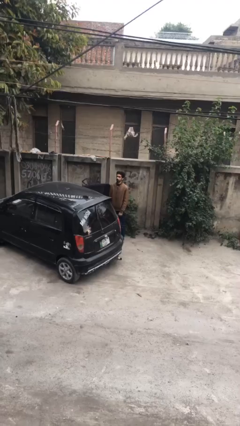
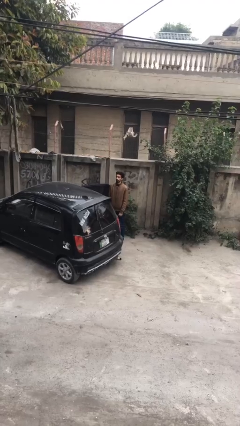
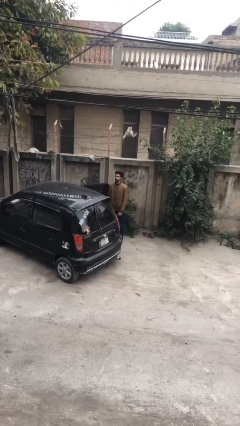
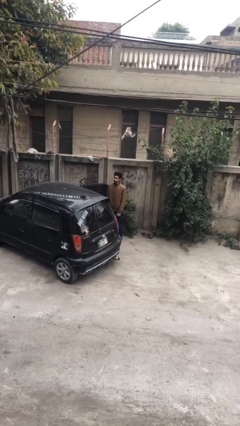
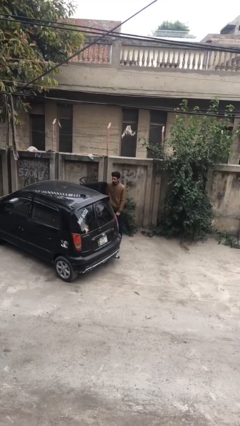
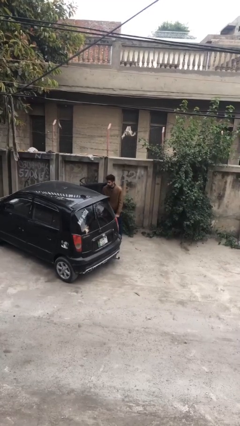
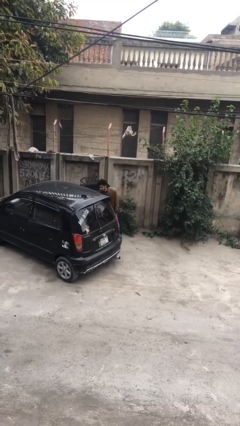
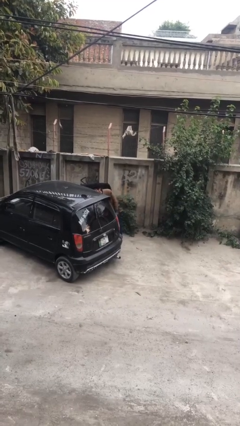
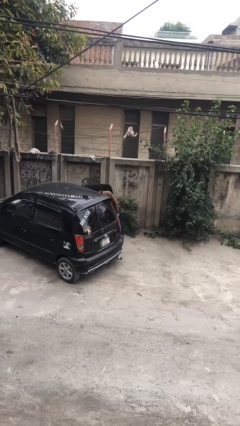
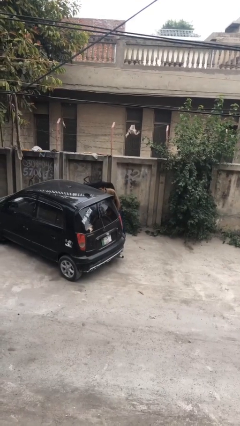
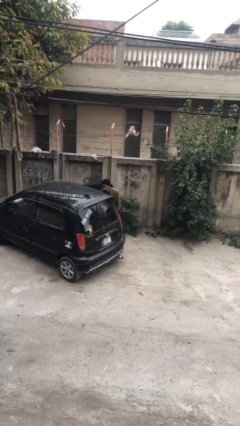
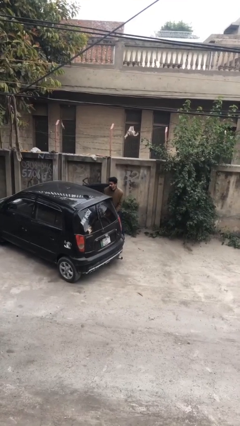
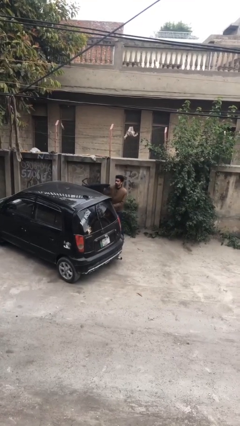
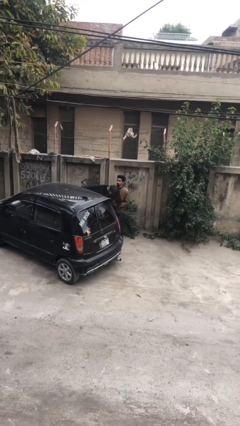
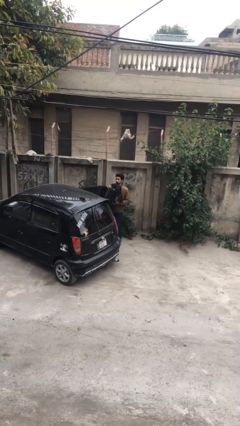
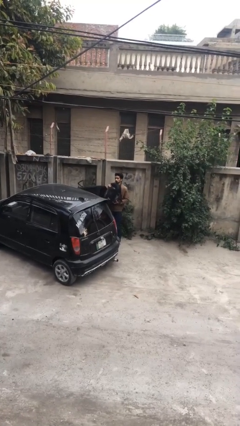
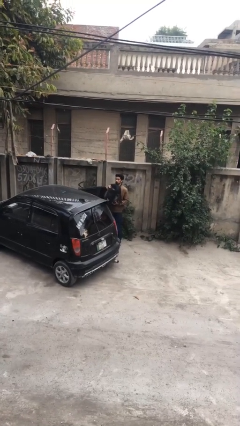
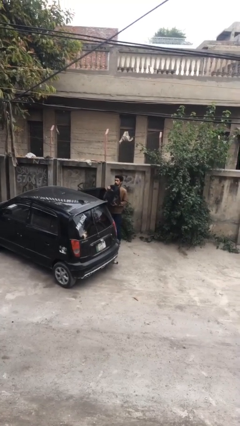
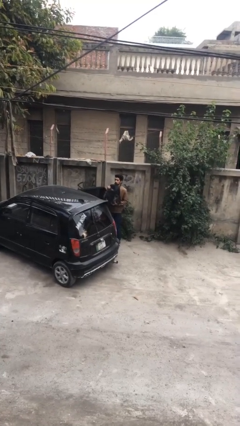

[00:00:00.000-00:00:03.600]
person unloads car

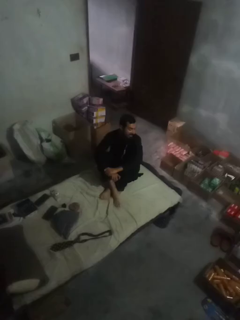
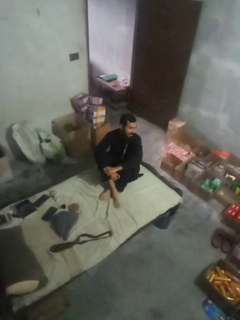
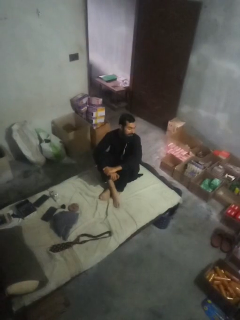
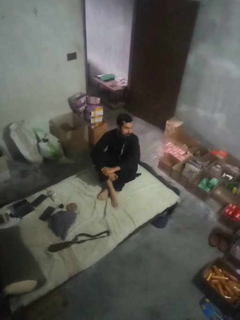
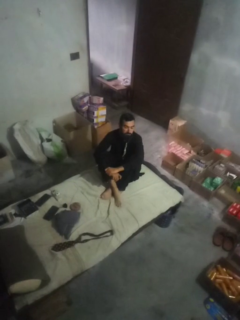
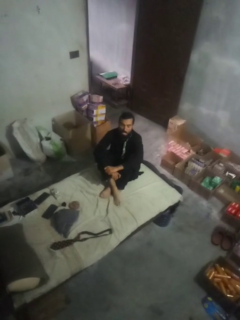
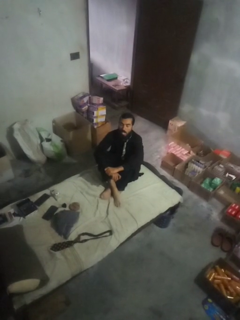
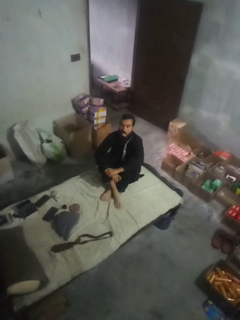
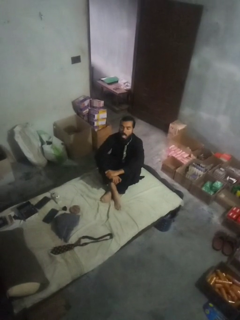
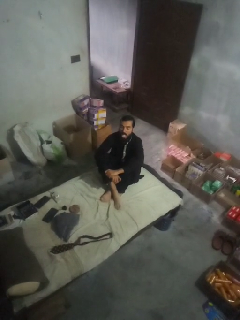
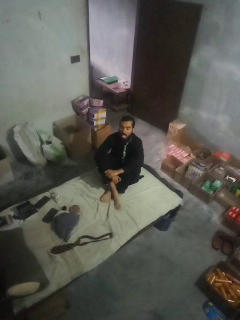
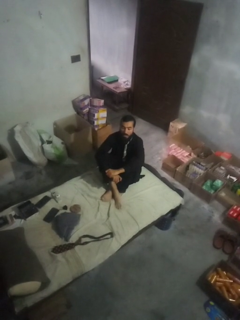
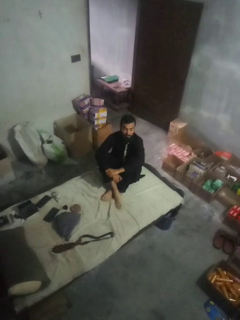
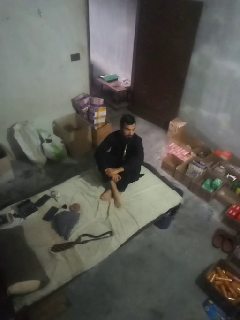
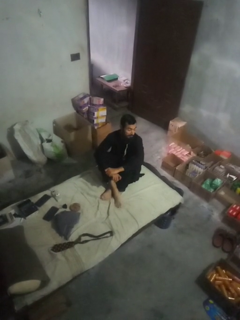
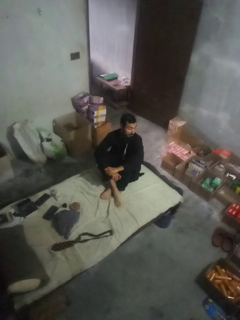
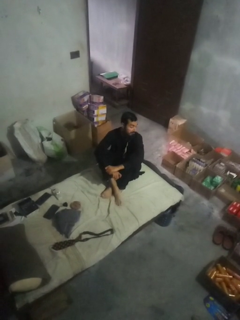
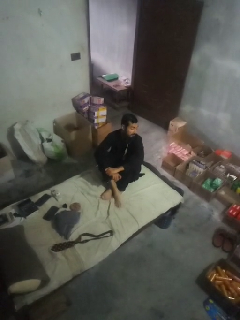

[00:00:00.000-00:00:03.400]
person sticks out tongue

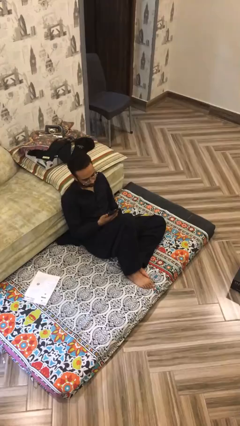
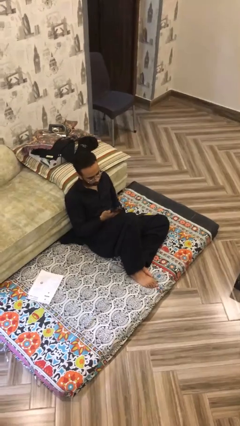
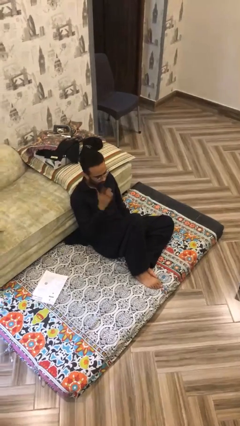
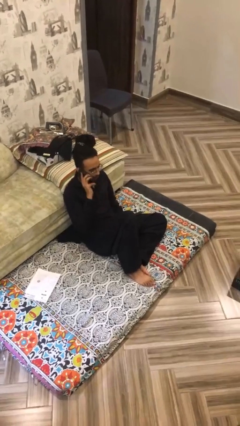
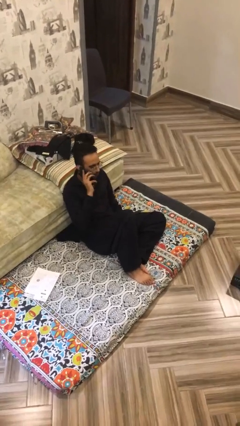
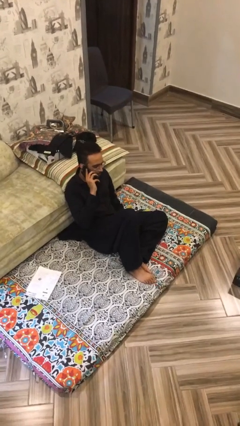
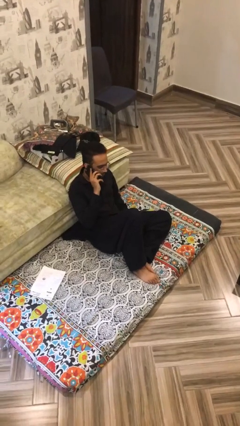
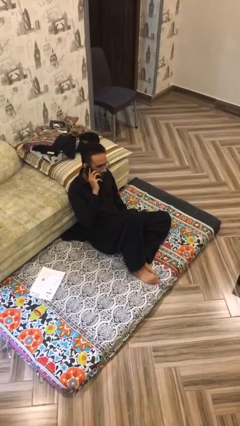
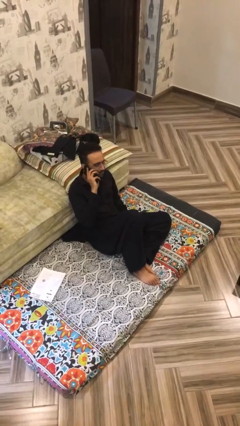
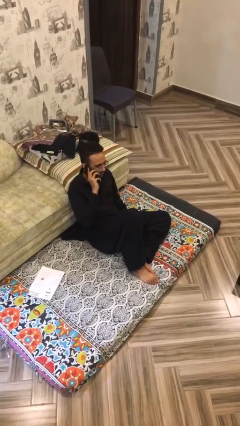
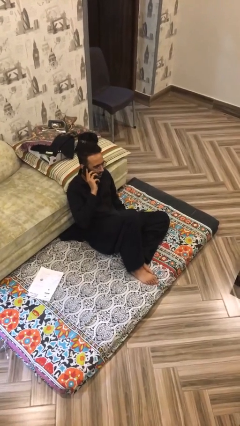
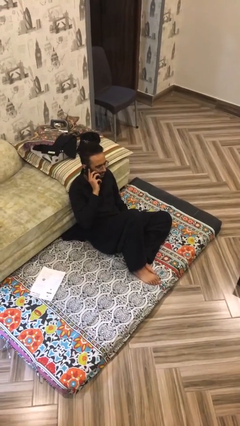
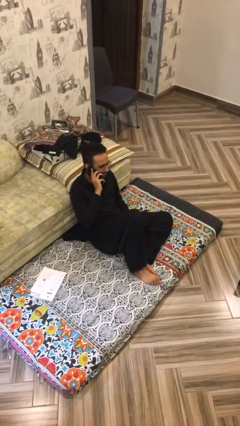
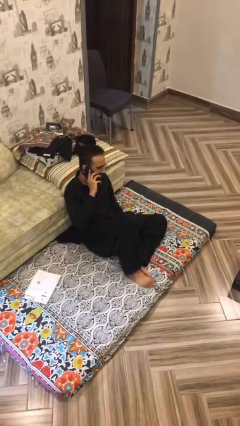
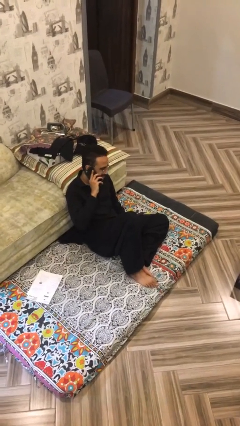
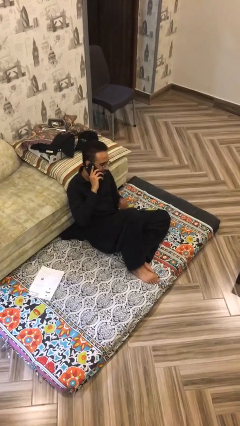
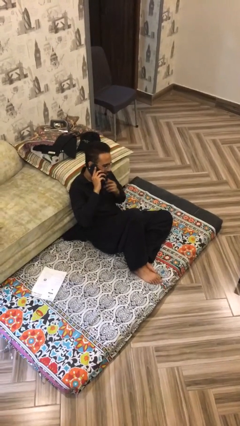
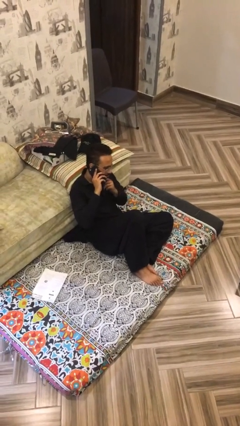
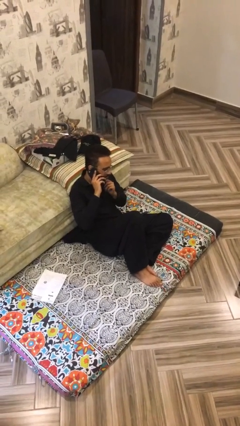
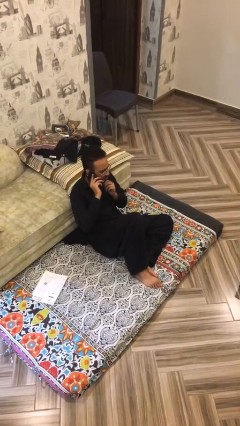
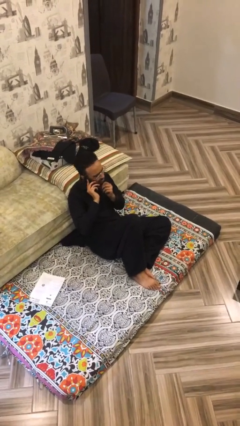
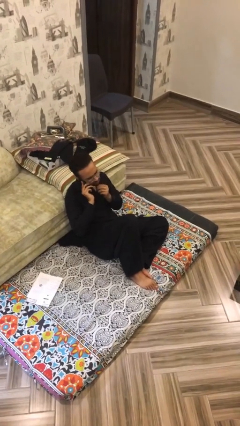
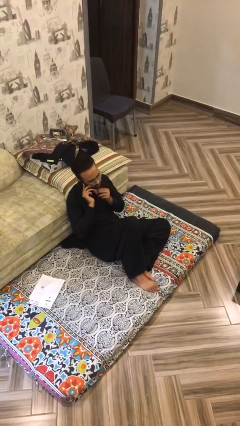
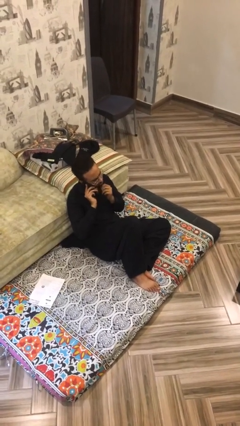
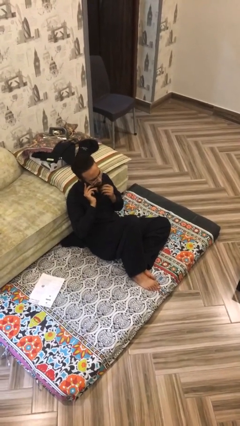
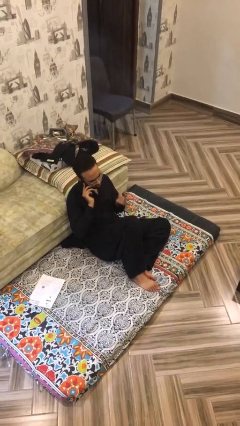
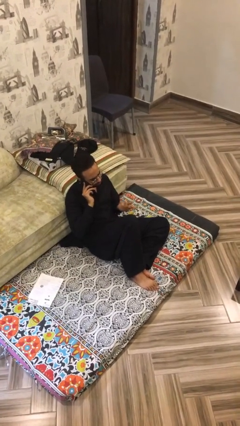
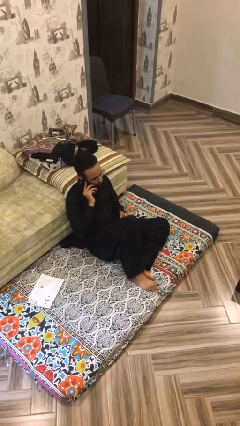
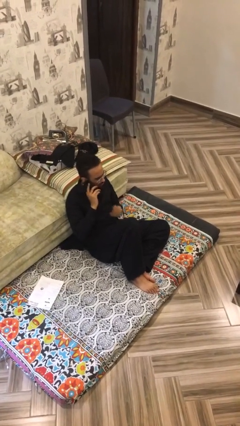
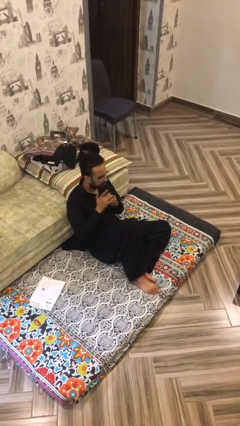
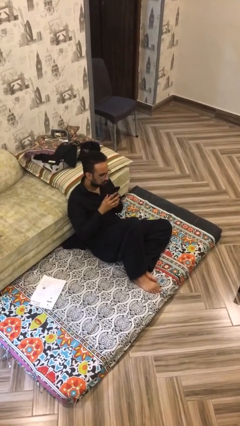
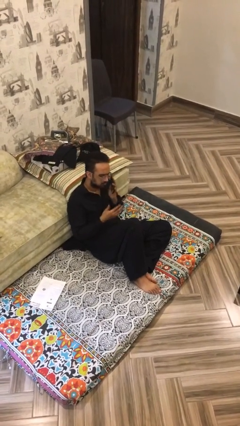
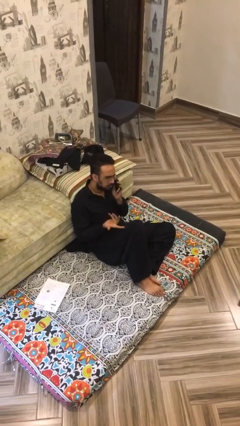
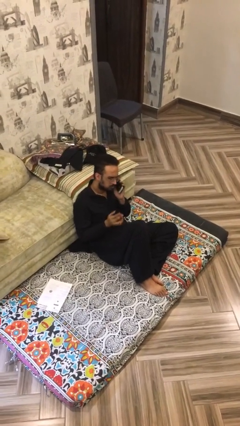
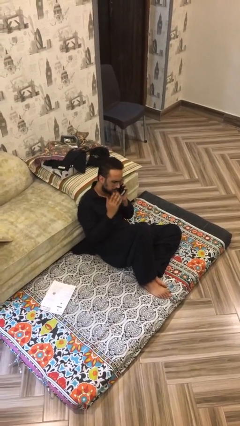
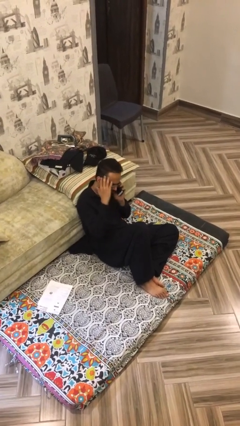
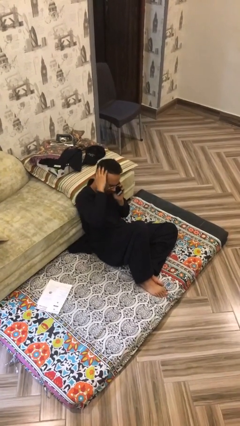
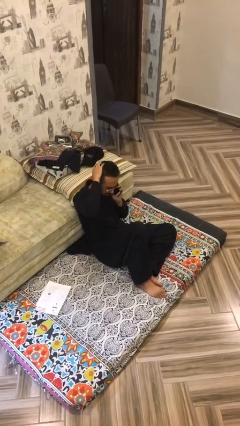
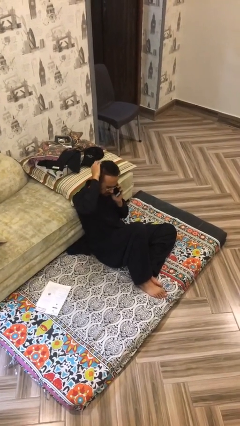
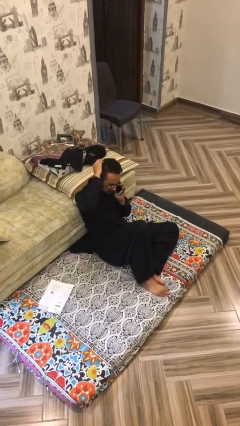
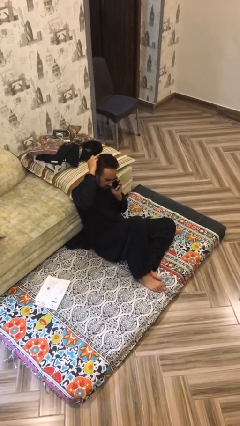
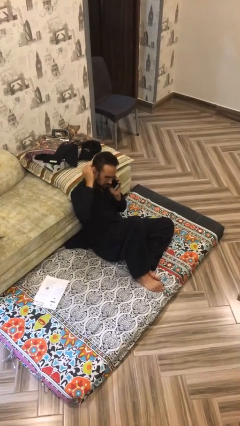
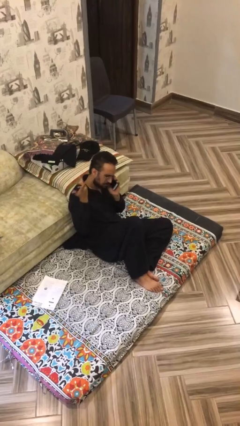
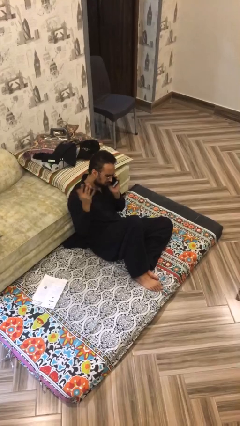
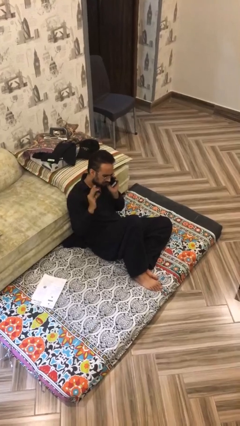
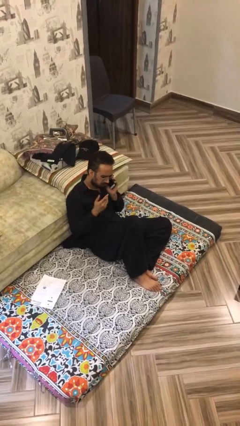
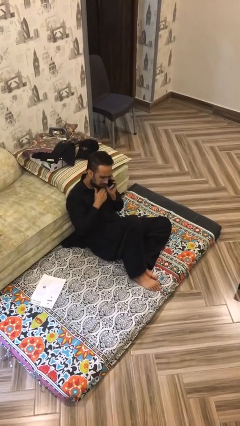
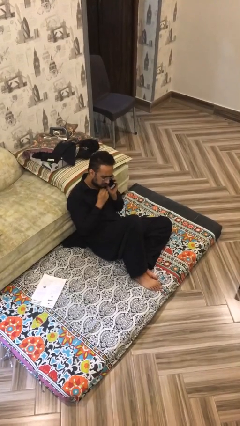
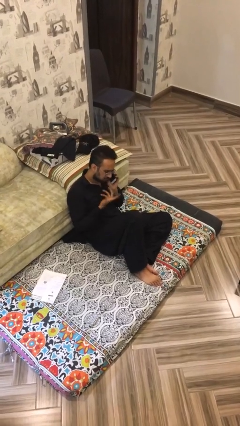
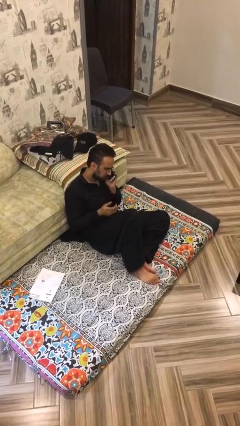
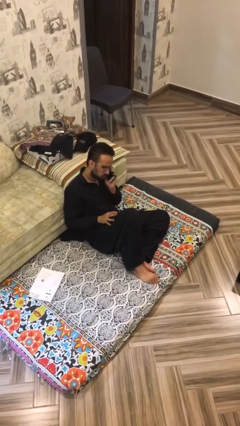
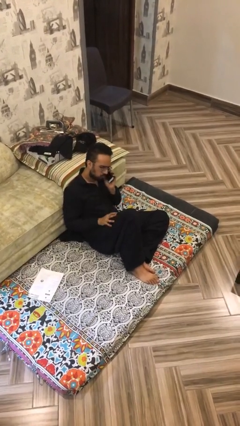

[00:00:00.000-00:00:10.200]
person talks on phone

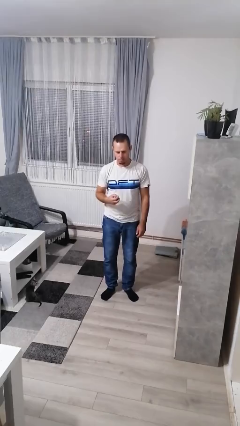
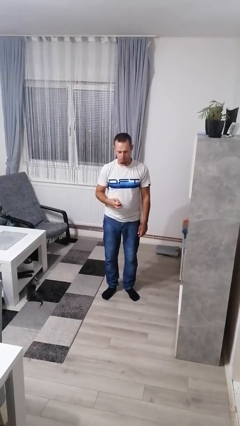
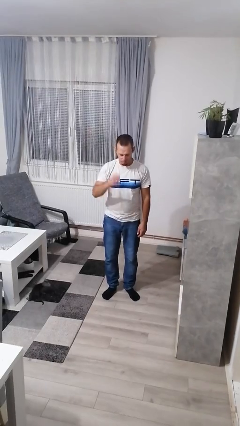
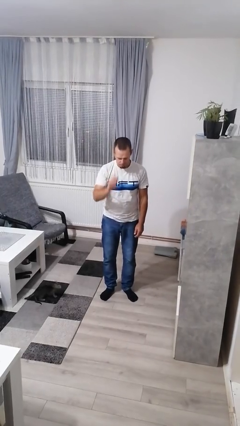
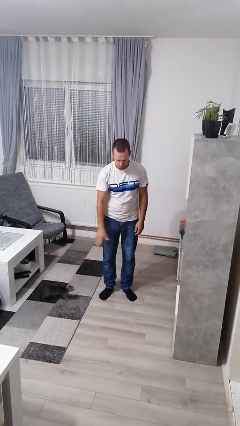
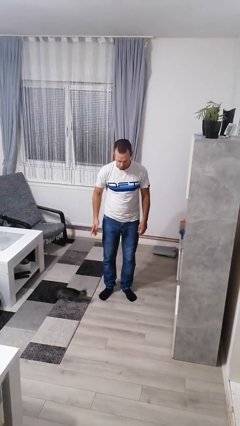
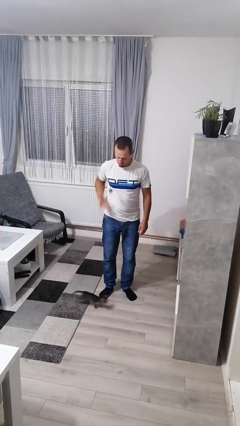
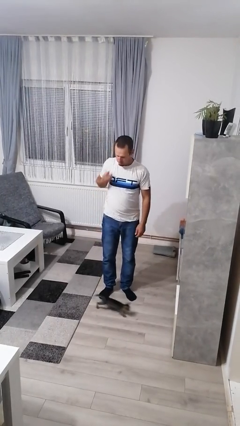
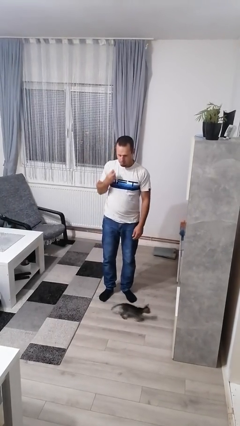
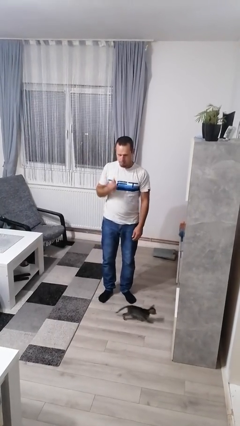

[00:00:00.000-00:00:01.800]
person bounces ball on floor
